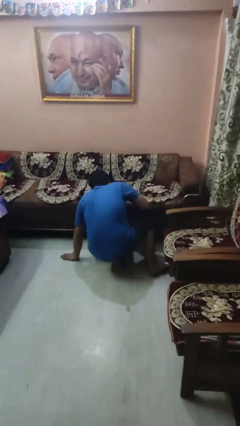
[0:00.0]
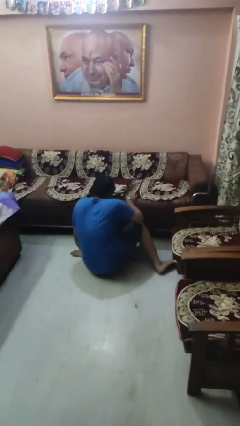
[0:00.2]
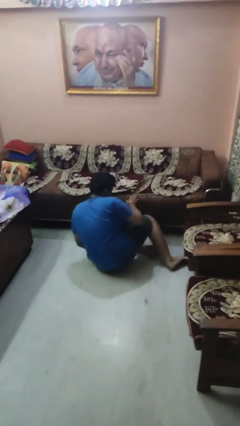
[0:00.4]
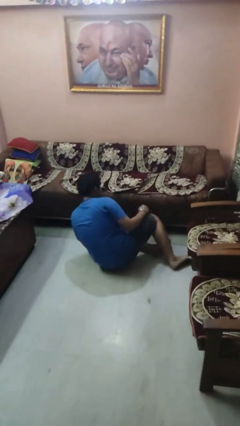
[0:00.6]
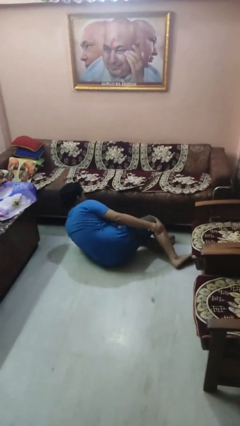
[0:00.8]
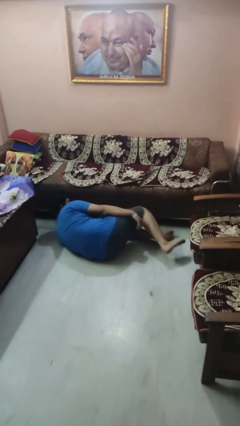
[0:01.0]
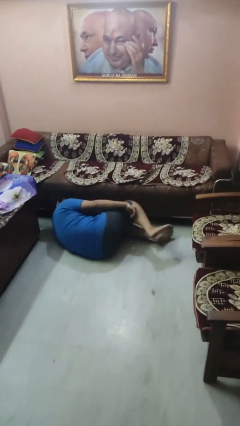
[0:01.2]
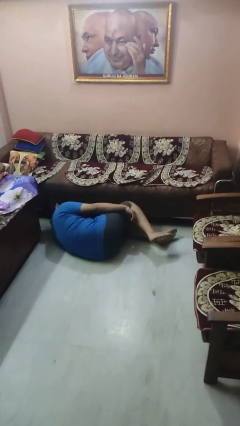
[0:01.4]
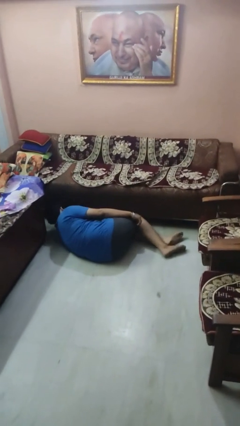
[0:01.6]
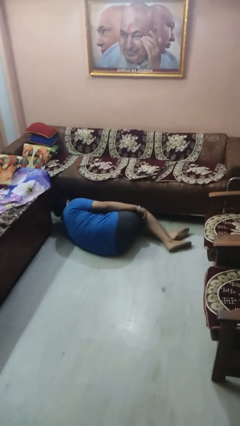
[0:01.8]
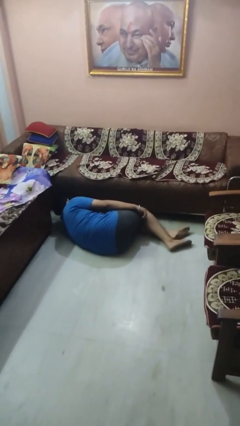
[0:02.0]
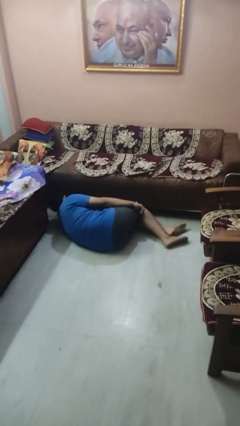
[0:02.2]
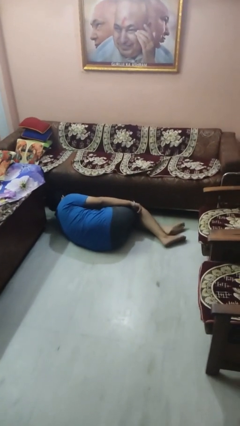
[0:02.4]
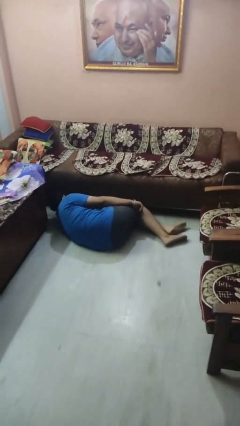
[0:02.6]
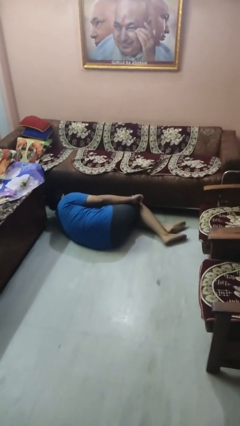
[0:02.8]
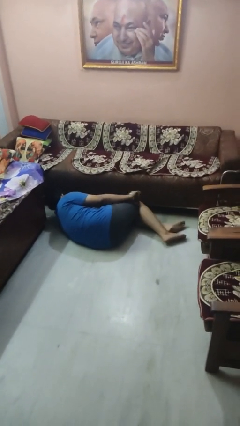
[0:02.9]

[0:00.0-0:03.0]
person lies down on floor

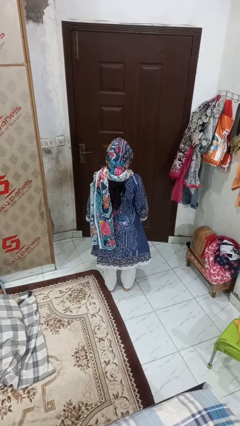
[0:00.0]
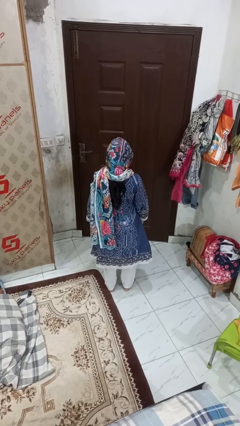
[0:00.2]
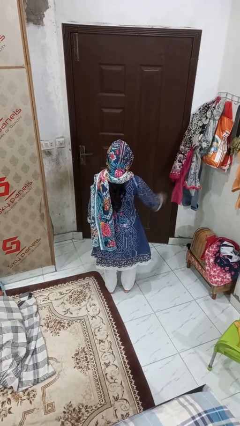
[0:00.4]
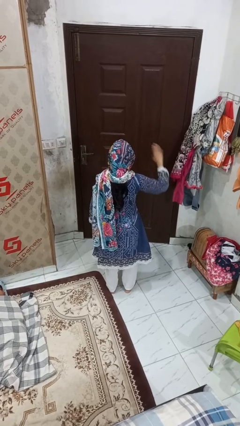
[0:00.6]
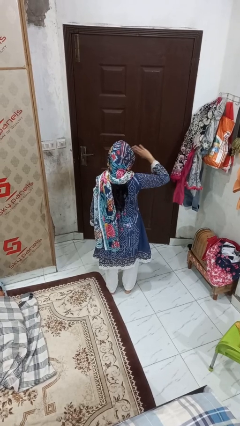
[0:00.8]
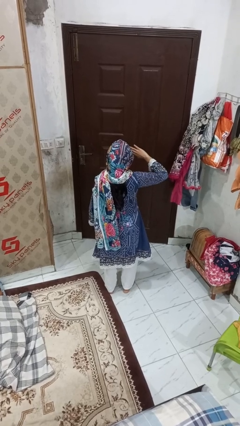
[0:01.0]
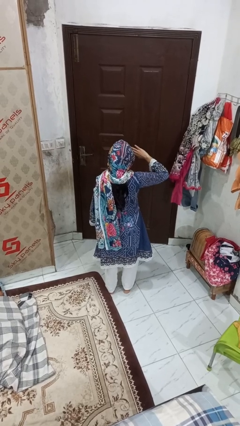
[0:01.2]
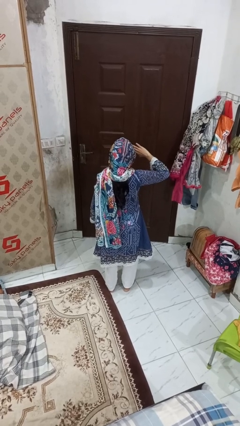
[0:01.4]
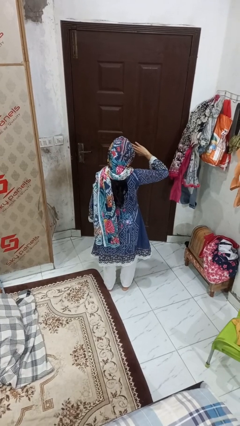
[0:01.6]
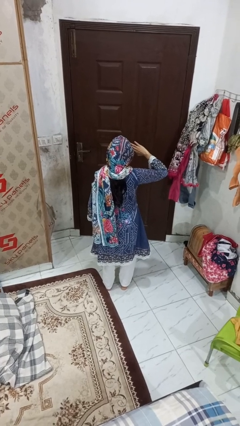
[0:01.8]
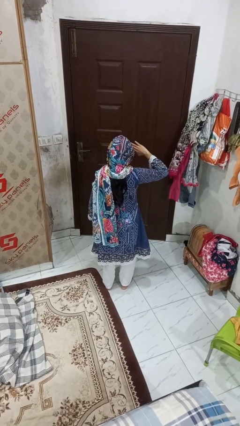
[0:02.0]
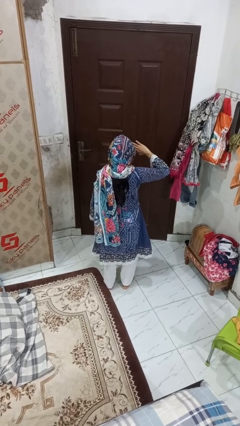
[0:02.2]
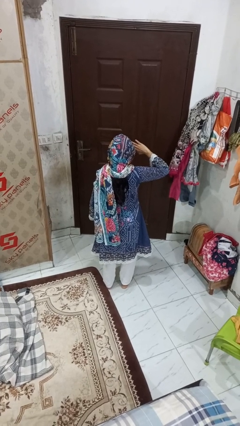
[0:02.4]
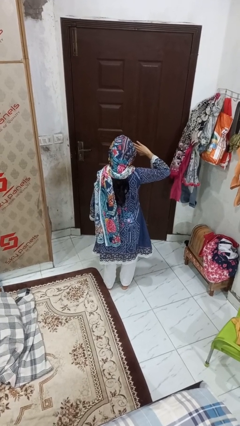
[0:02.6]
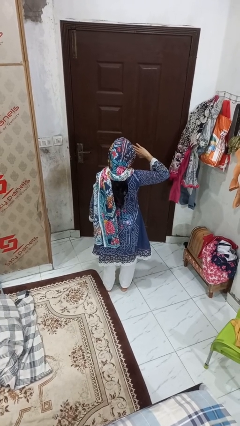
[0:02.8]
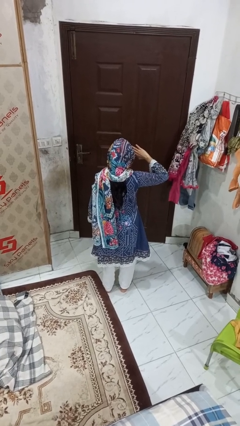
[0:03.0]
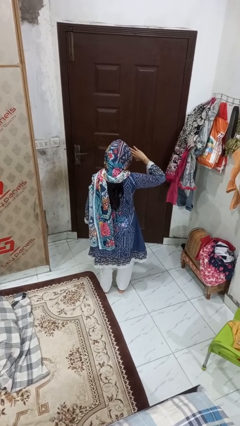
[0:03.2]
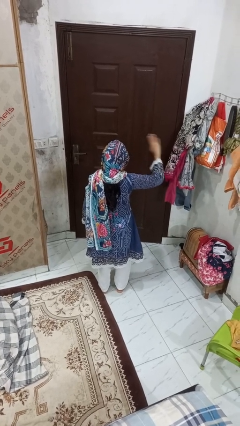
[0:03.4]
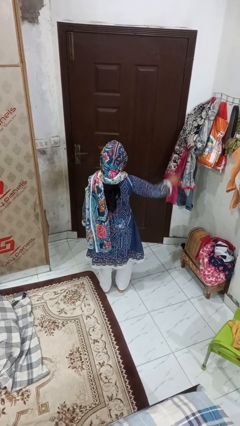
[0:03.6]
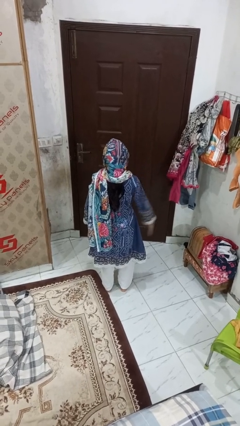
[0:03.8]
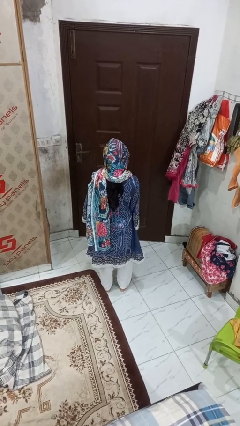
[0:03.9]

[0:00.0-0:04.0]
person salutes

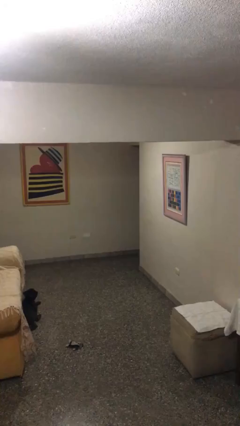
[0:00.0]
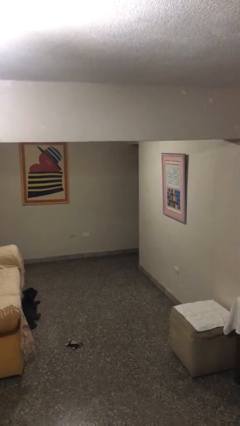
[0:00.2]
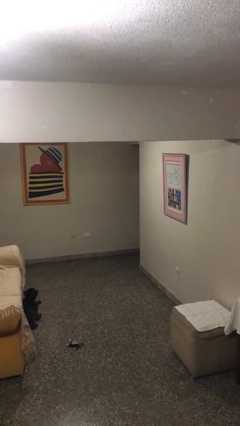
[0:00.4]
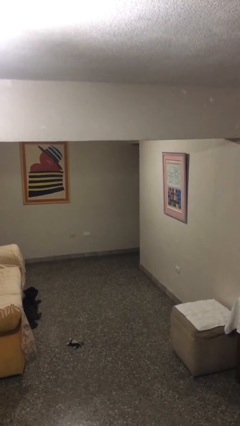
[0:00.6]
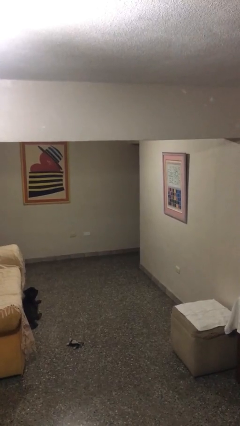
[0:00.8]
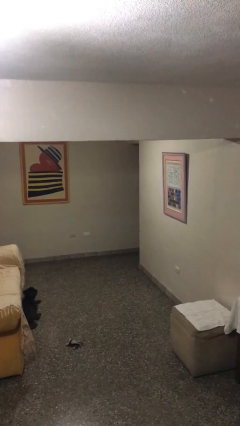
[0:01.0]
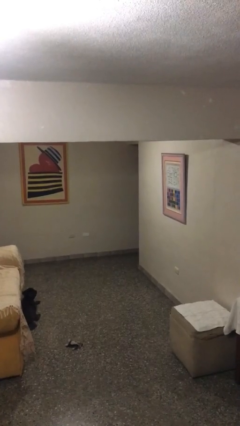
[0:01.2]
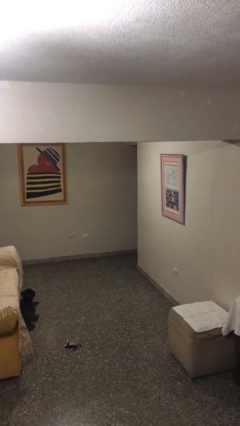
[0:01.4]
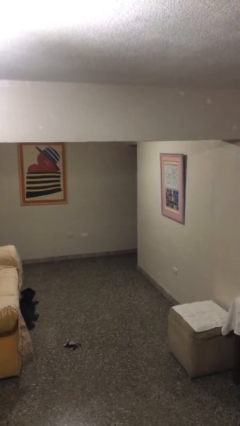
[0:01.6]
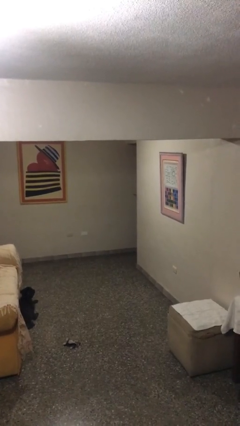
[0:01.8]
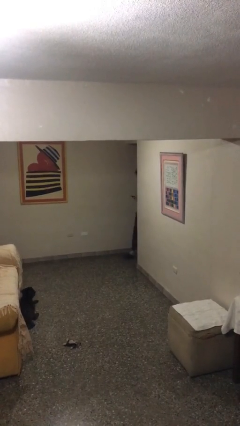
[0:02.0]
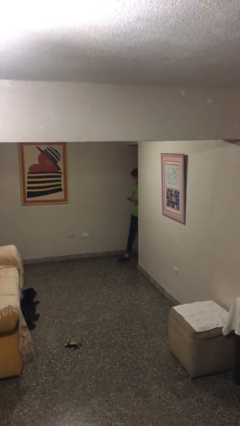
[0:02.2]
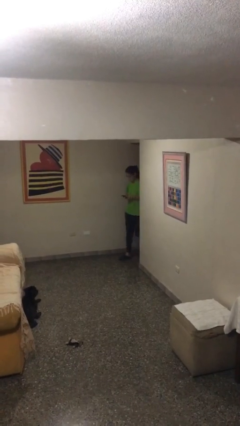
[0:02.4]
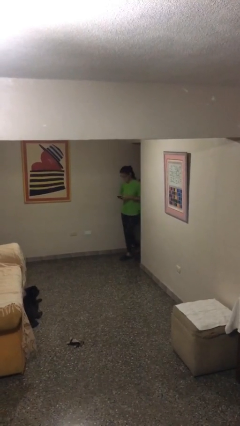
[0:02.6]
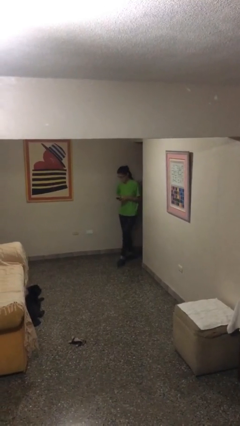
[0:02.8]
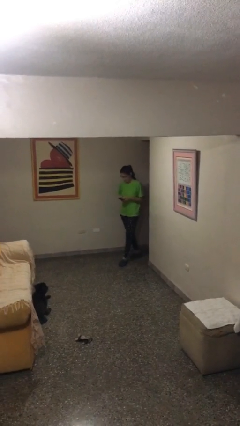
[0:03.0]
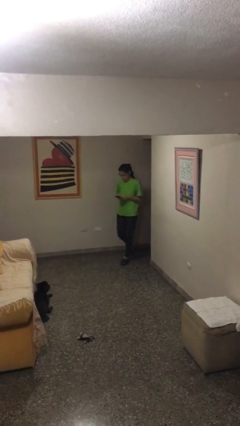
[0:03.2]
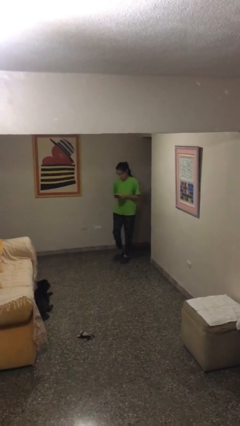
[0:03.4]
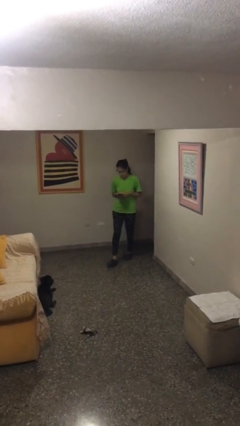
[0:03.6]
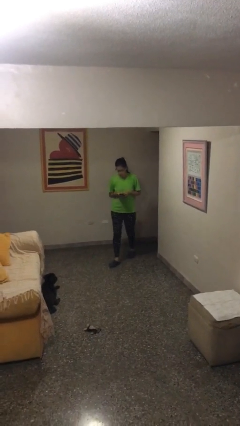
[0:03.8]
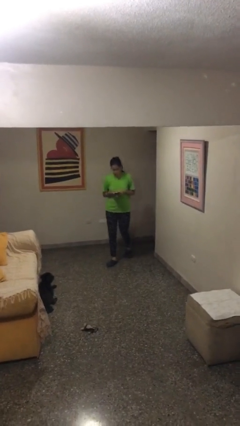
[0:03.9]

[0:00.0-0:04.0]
person enters scene through structure

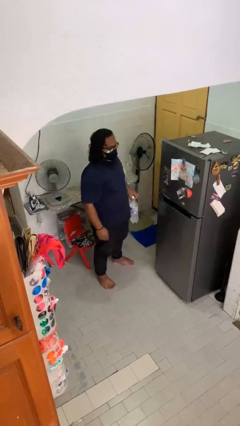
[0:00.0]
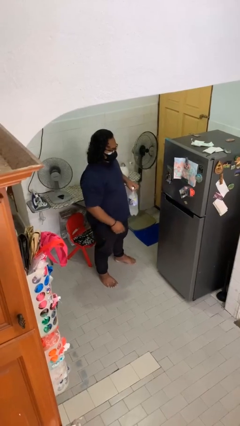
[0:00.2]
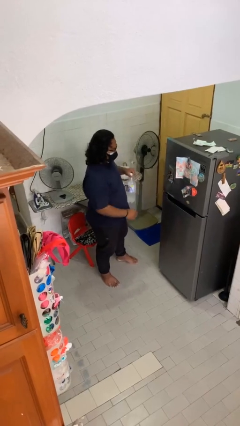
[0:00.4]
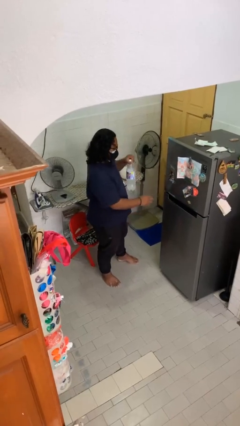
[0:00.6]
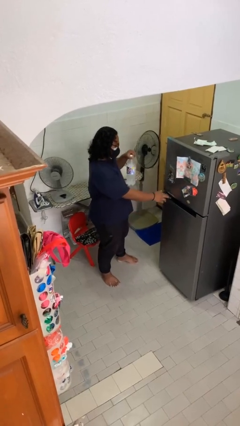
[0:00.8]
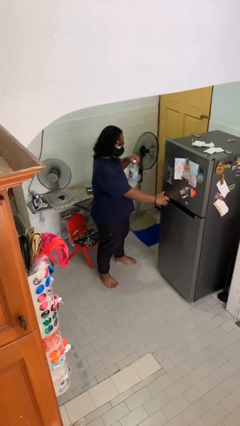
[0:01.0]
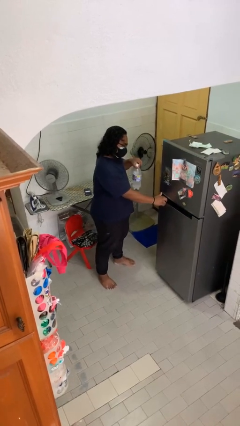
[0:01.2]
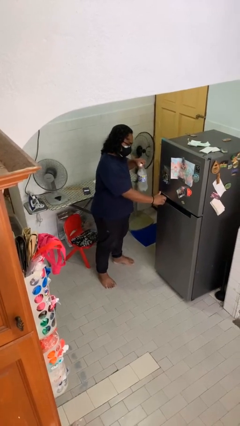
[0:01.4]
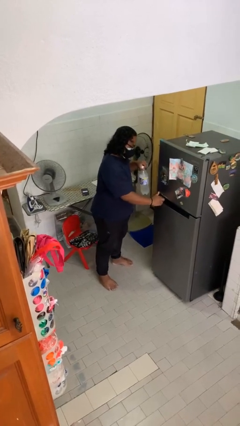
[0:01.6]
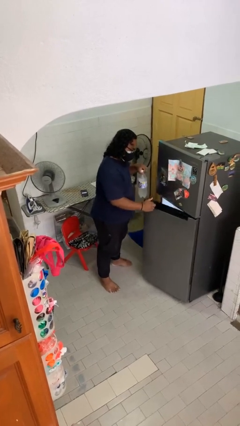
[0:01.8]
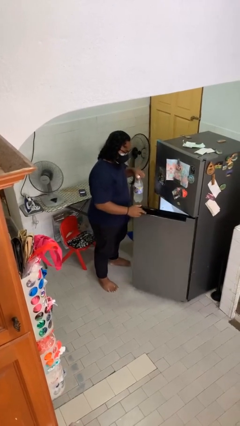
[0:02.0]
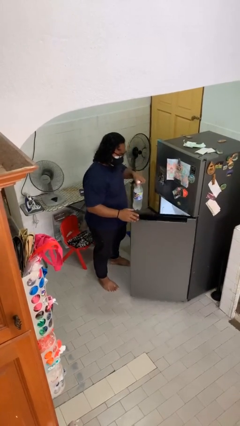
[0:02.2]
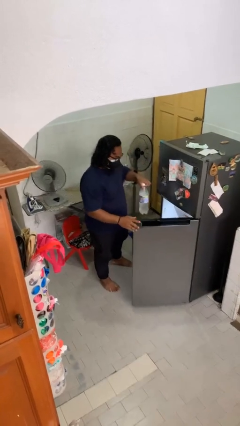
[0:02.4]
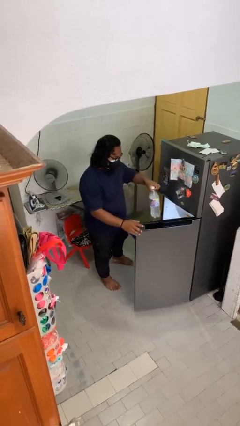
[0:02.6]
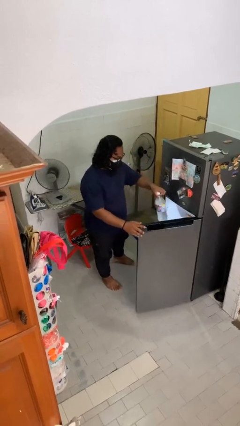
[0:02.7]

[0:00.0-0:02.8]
person opens refrigerator

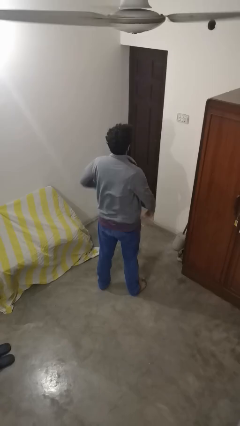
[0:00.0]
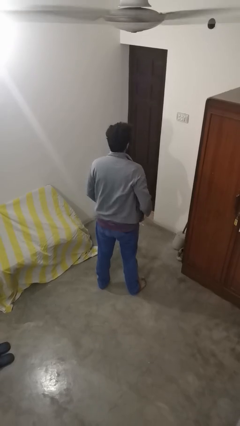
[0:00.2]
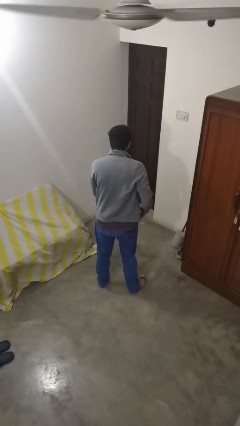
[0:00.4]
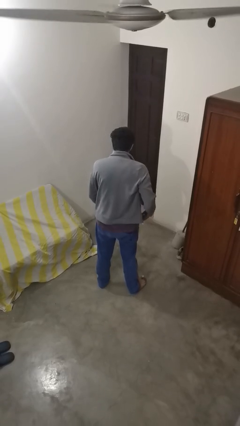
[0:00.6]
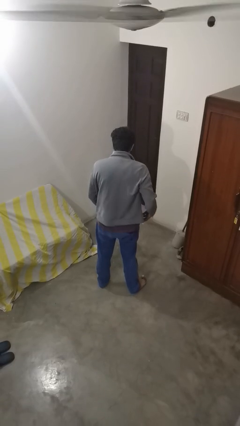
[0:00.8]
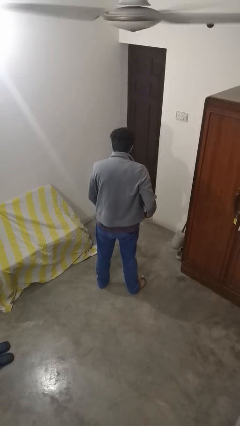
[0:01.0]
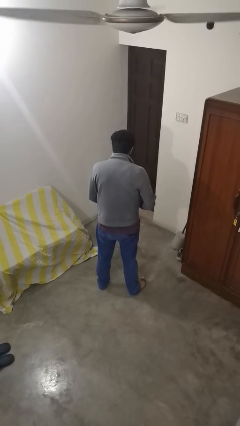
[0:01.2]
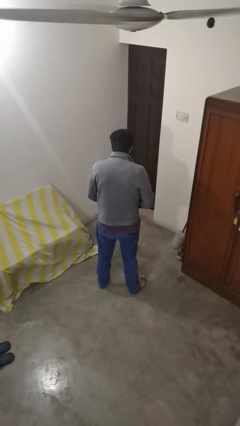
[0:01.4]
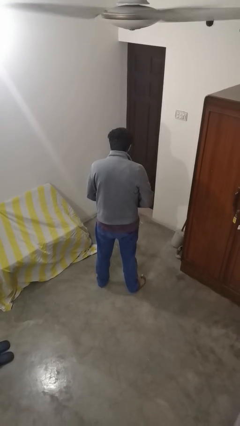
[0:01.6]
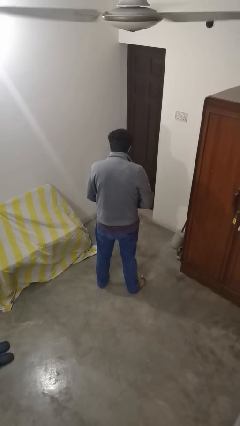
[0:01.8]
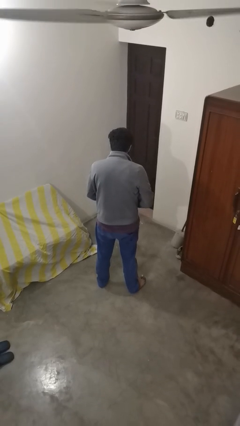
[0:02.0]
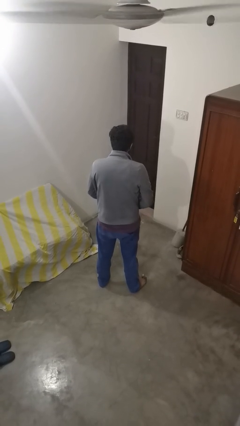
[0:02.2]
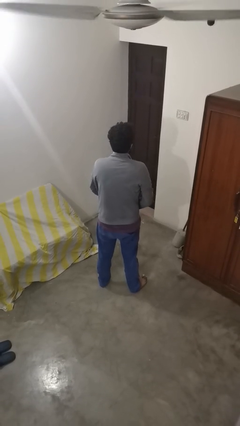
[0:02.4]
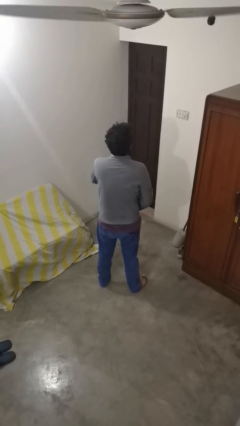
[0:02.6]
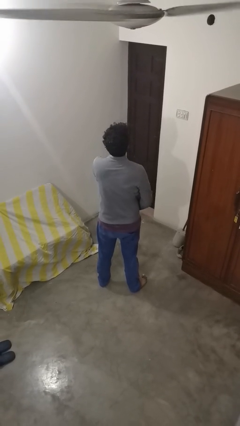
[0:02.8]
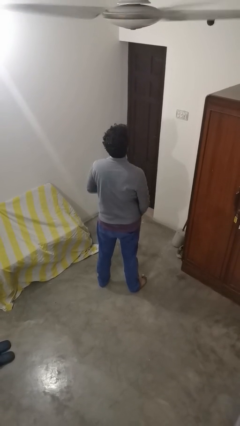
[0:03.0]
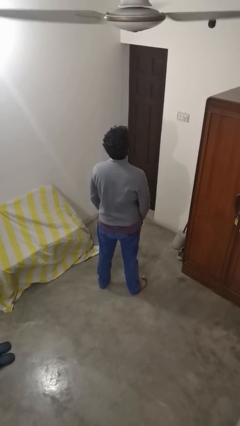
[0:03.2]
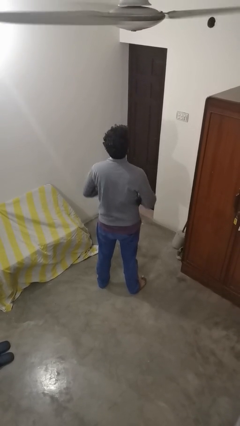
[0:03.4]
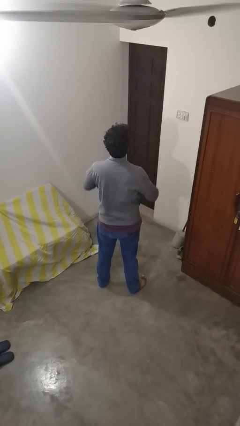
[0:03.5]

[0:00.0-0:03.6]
person zips up jacket
